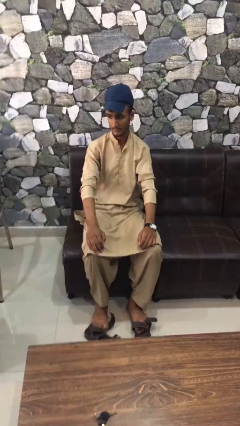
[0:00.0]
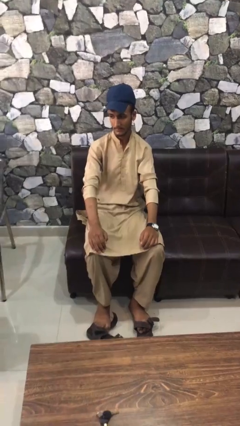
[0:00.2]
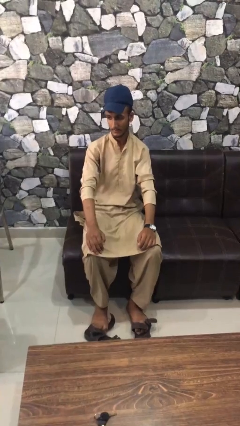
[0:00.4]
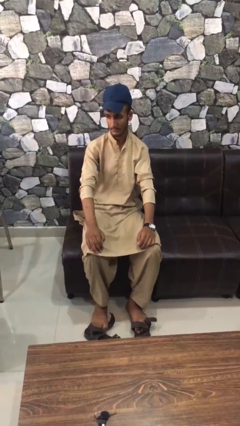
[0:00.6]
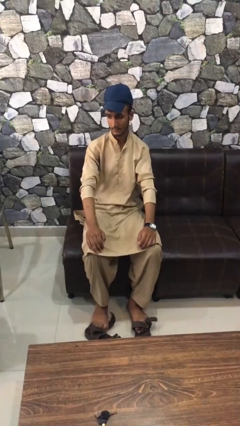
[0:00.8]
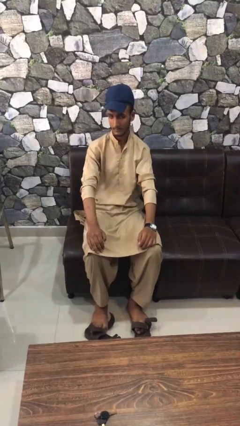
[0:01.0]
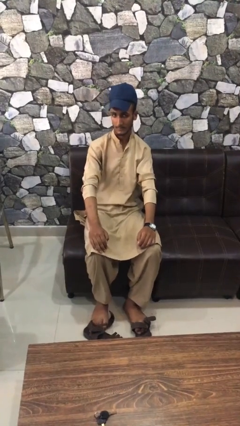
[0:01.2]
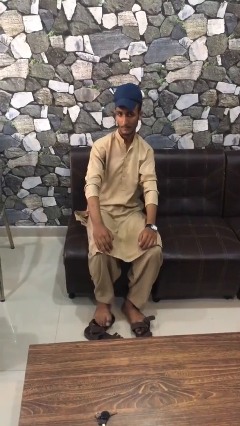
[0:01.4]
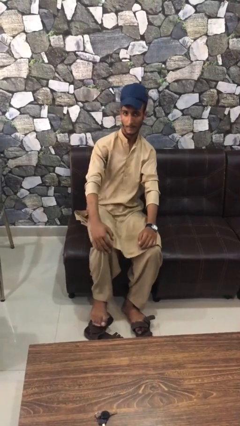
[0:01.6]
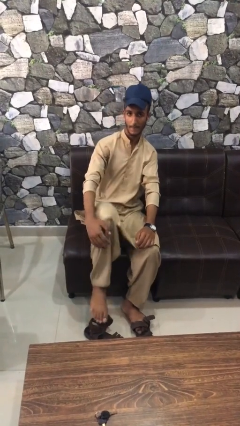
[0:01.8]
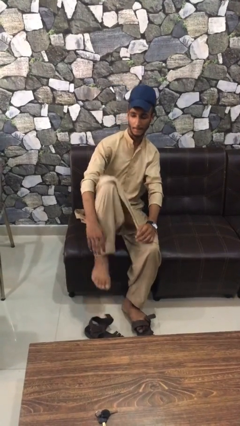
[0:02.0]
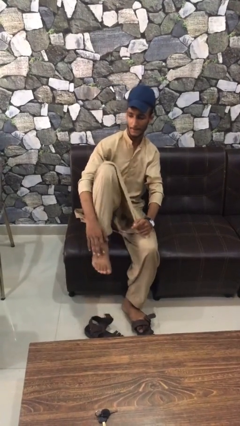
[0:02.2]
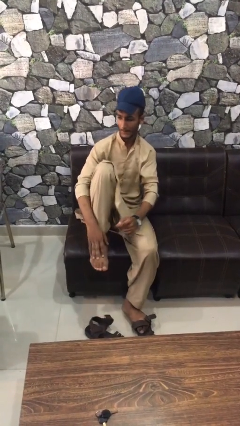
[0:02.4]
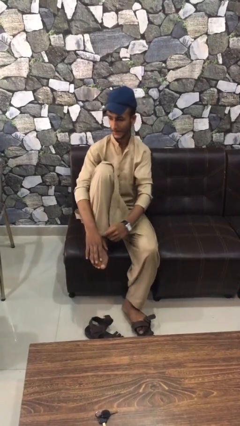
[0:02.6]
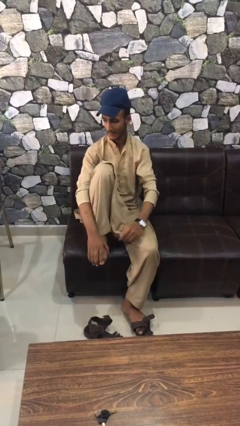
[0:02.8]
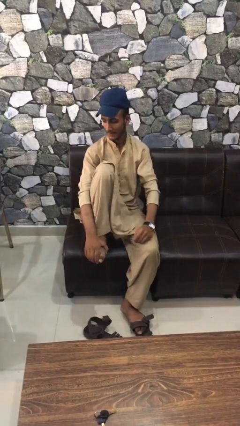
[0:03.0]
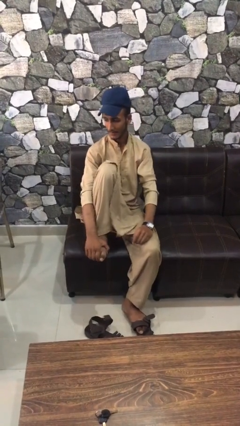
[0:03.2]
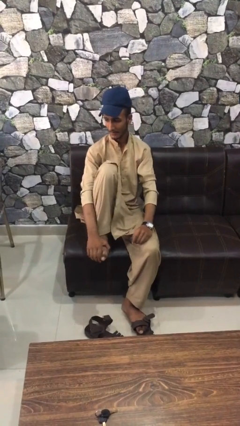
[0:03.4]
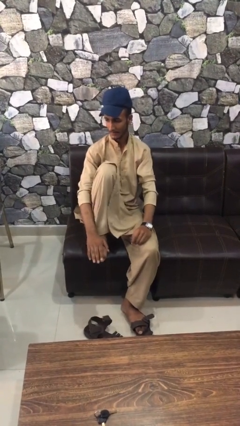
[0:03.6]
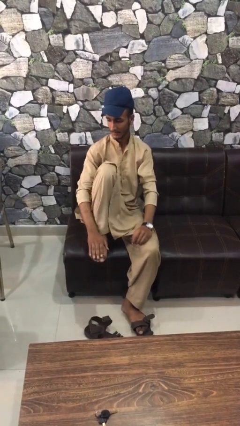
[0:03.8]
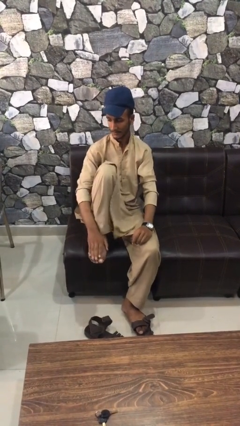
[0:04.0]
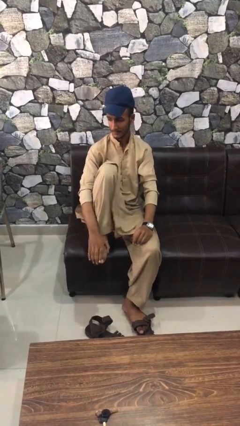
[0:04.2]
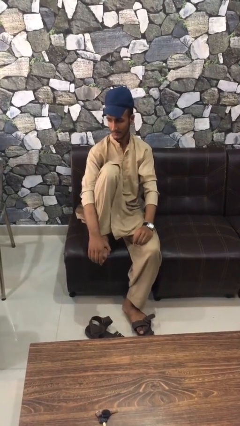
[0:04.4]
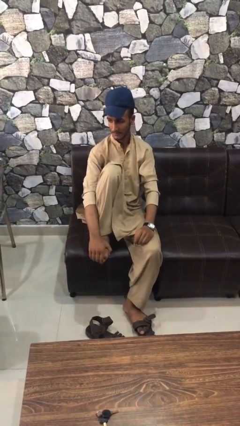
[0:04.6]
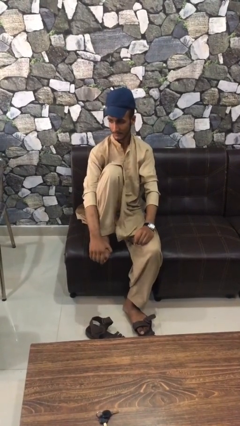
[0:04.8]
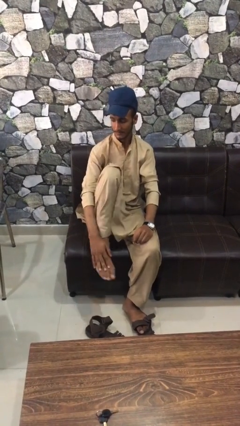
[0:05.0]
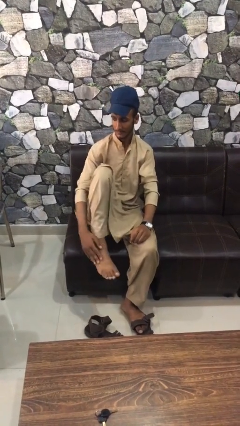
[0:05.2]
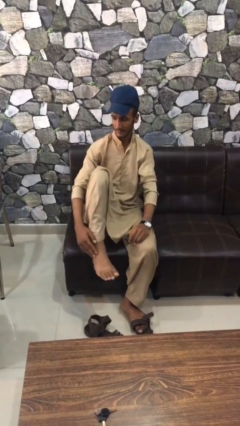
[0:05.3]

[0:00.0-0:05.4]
person rubs foot

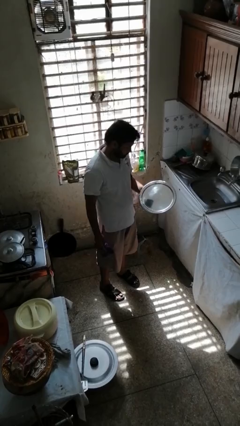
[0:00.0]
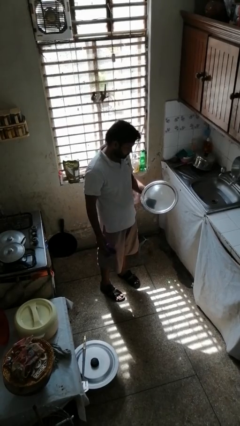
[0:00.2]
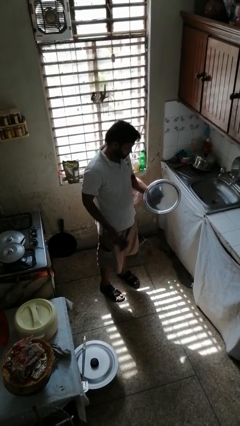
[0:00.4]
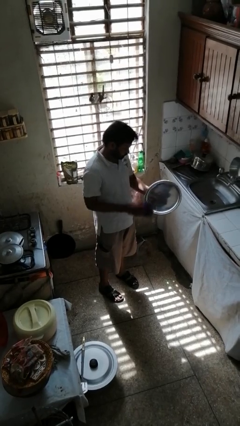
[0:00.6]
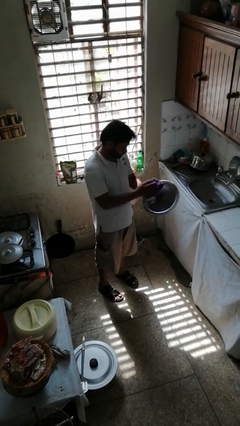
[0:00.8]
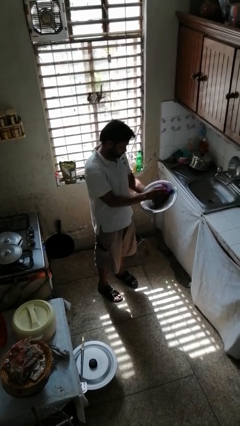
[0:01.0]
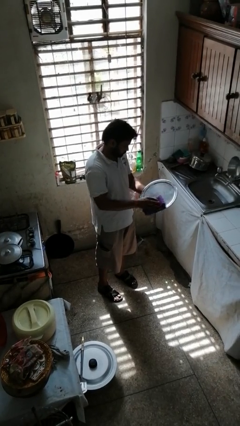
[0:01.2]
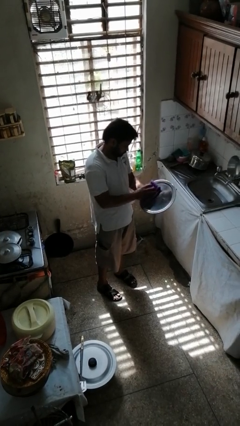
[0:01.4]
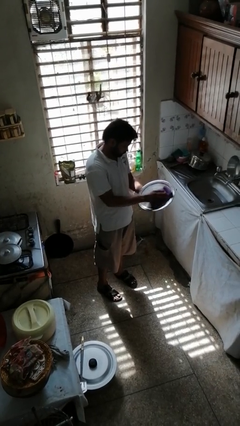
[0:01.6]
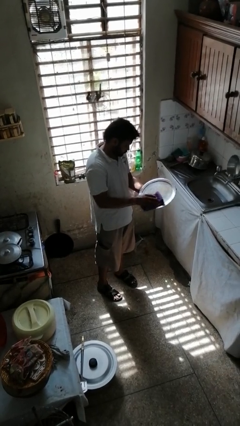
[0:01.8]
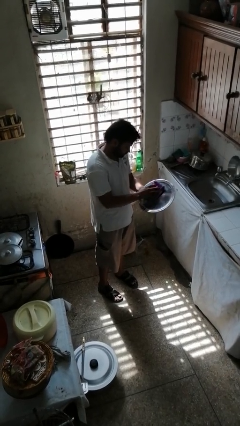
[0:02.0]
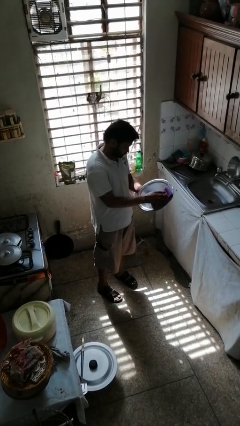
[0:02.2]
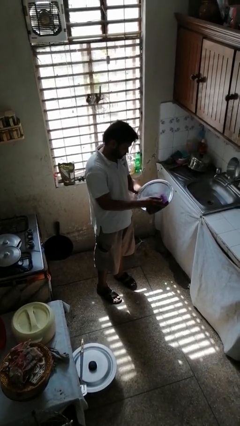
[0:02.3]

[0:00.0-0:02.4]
person dries dish

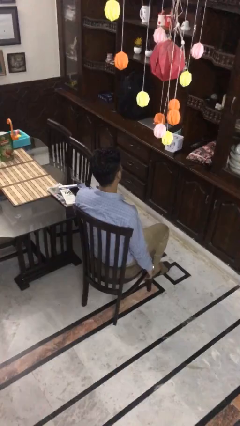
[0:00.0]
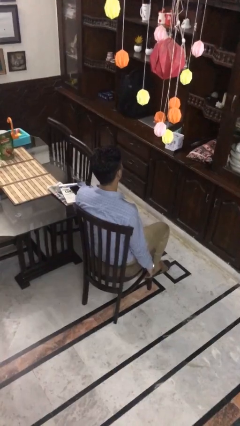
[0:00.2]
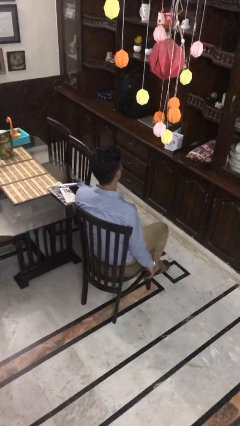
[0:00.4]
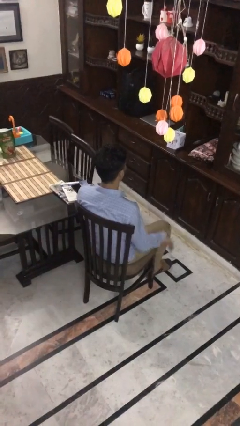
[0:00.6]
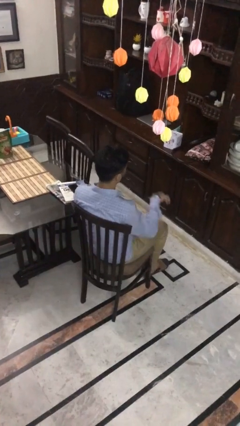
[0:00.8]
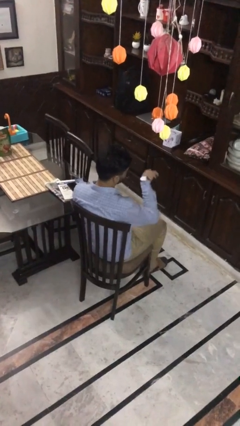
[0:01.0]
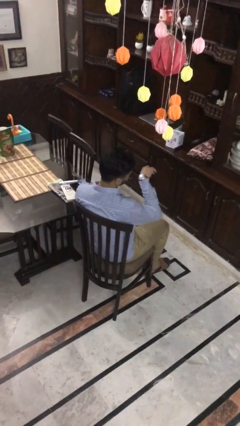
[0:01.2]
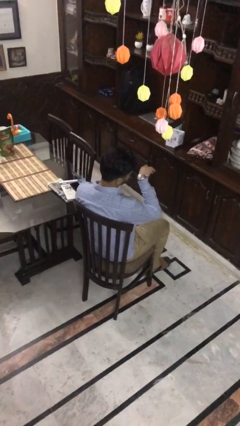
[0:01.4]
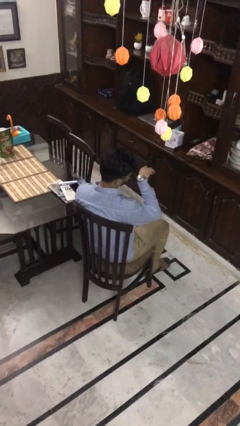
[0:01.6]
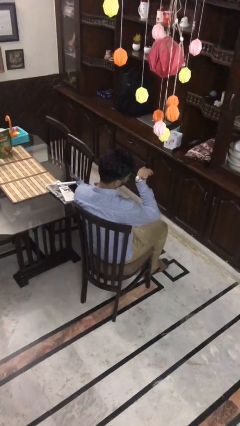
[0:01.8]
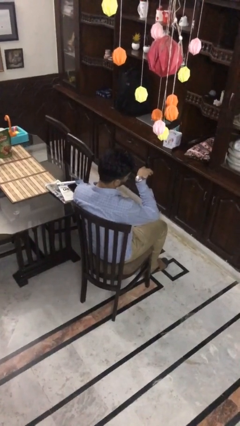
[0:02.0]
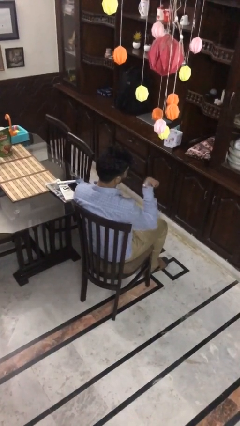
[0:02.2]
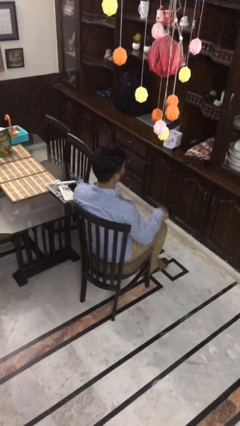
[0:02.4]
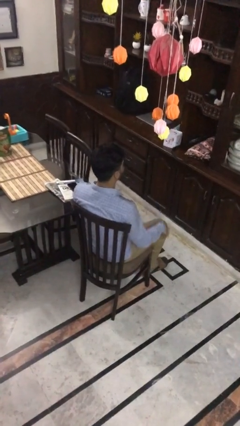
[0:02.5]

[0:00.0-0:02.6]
person looks at wristwatch

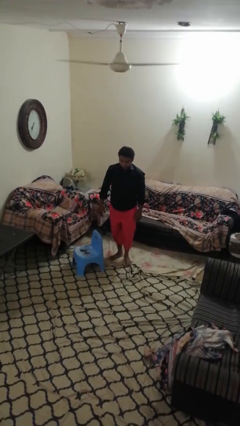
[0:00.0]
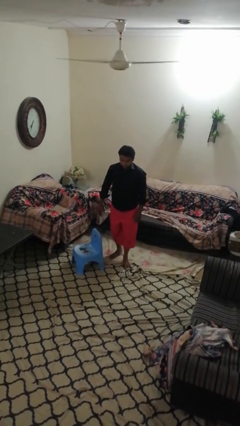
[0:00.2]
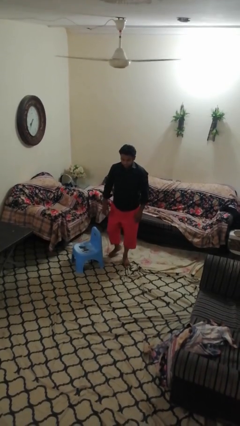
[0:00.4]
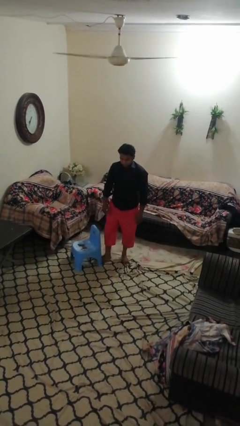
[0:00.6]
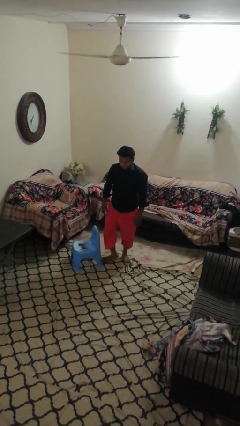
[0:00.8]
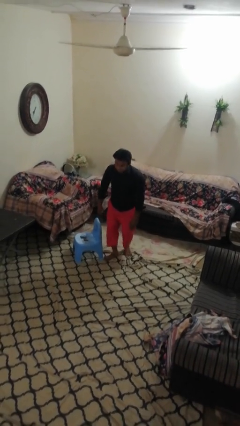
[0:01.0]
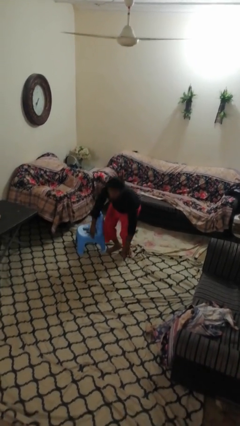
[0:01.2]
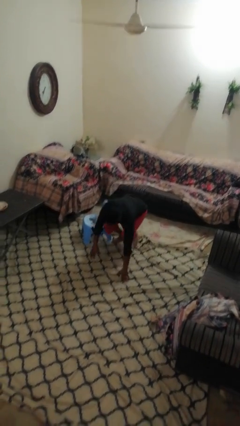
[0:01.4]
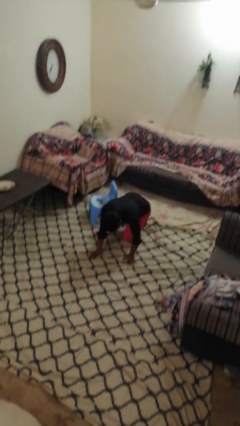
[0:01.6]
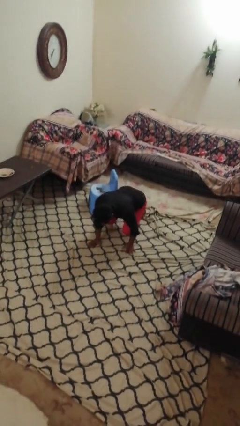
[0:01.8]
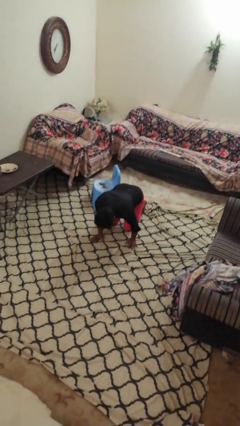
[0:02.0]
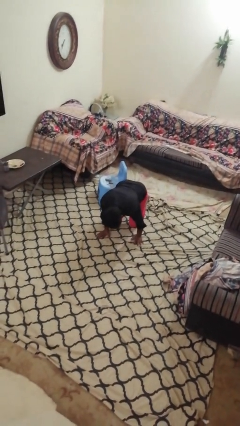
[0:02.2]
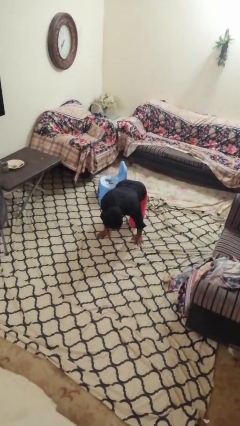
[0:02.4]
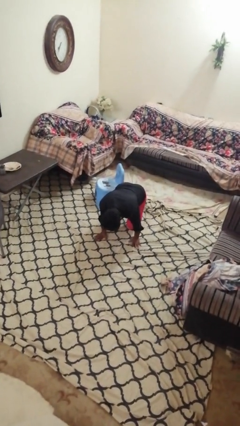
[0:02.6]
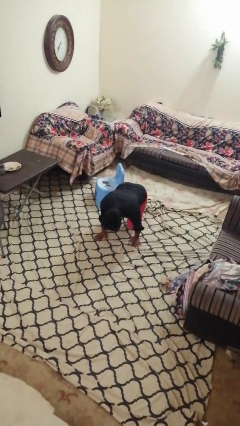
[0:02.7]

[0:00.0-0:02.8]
person trips on object on floor

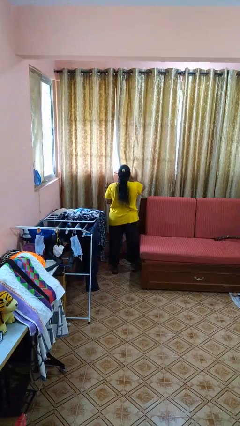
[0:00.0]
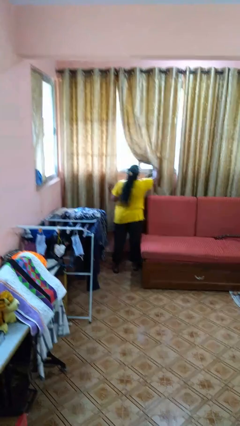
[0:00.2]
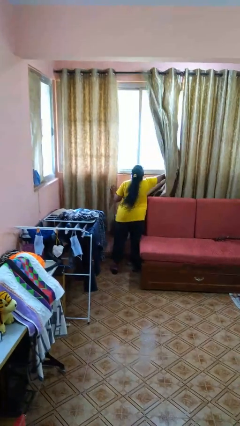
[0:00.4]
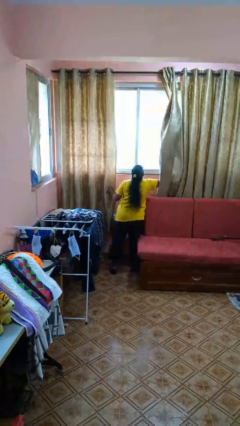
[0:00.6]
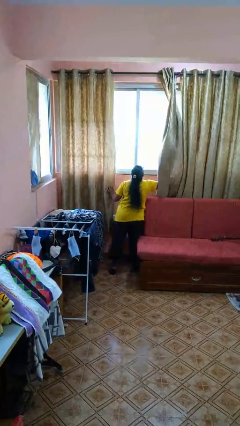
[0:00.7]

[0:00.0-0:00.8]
person opens curtains

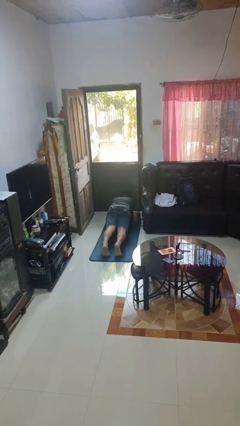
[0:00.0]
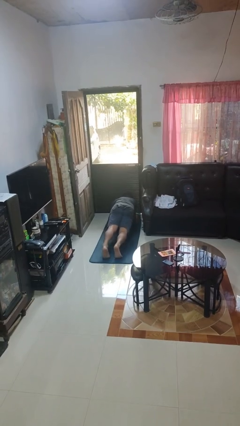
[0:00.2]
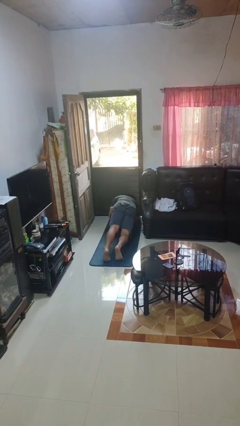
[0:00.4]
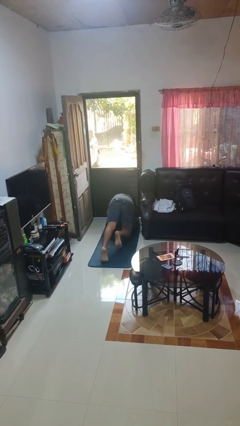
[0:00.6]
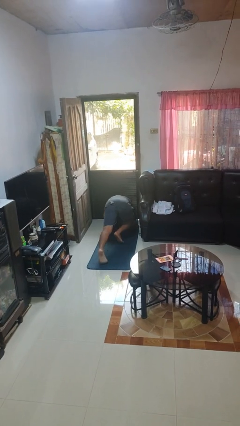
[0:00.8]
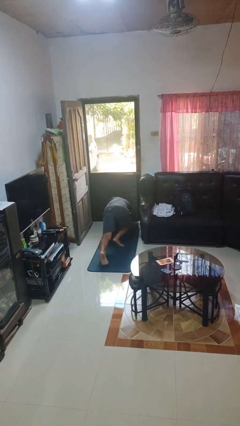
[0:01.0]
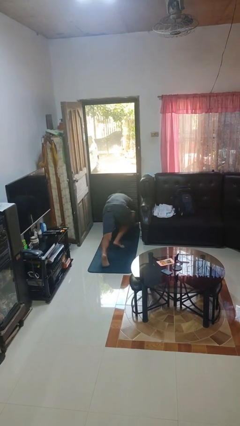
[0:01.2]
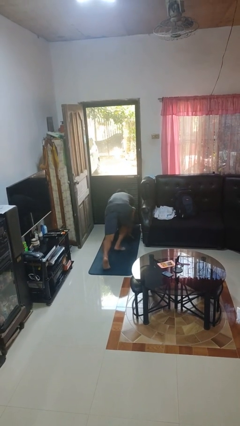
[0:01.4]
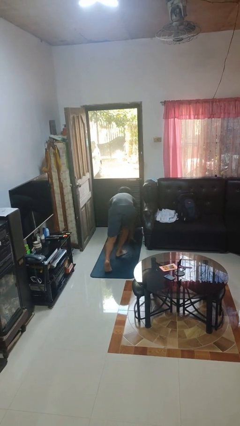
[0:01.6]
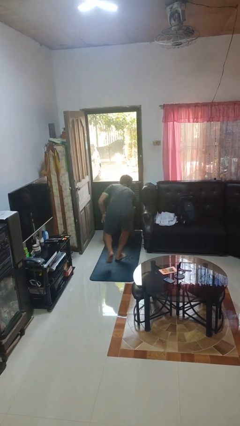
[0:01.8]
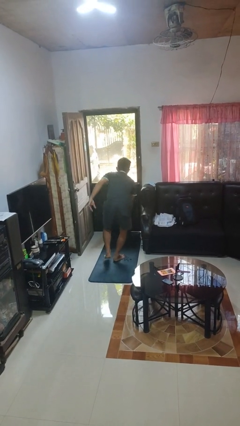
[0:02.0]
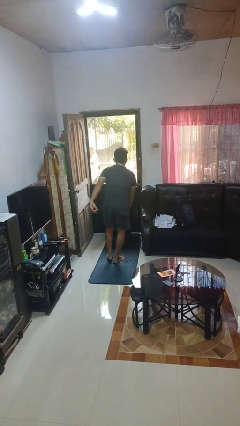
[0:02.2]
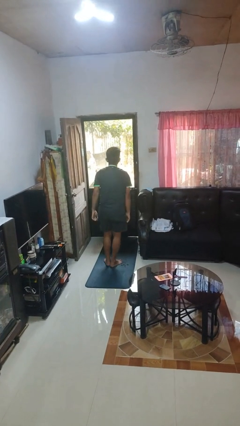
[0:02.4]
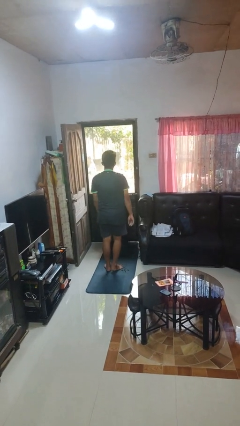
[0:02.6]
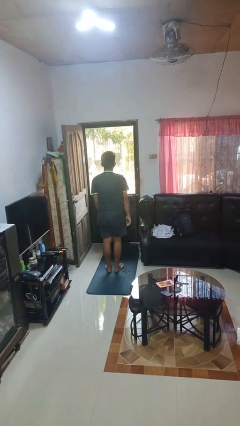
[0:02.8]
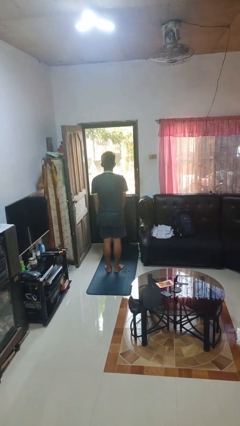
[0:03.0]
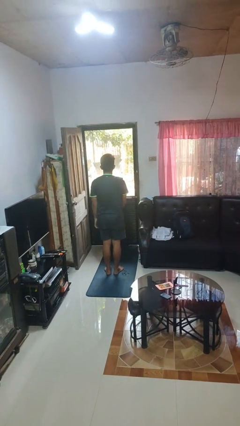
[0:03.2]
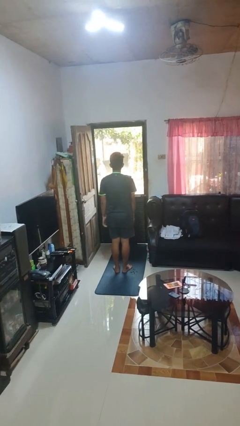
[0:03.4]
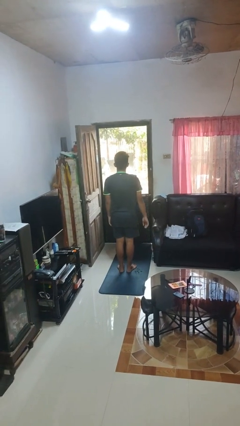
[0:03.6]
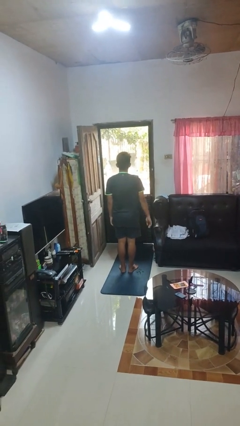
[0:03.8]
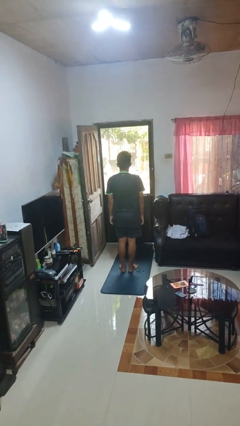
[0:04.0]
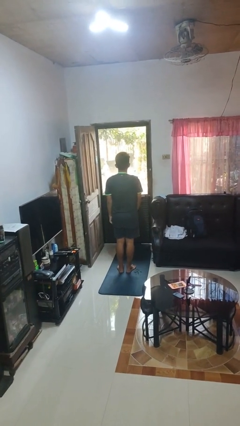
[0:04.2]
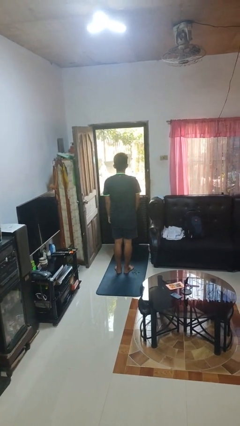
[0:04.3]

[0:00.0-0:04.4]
person stands up from floor
